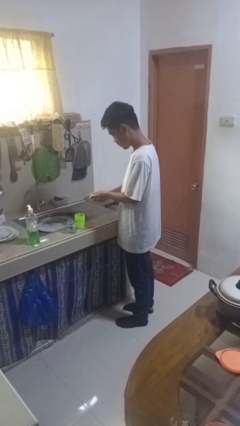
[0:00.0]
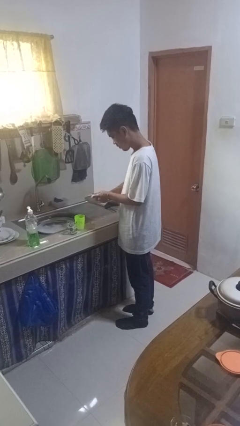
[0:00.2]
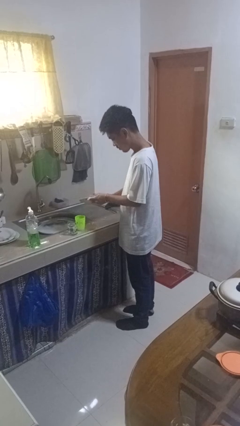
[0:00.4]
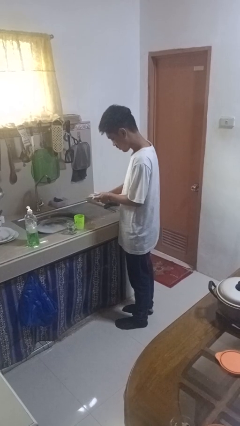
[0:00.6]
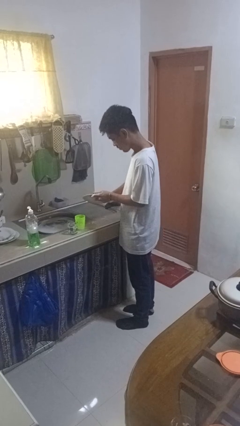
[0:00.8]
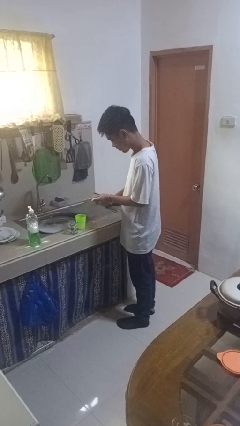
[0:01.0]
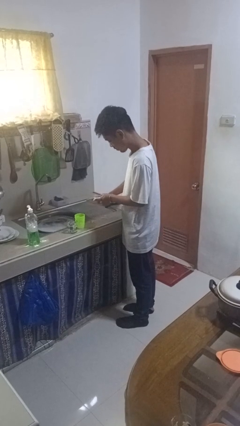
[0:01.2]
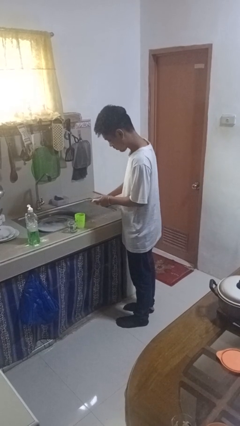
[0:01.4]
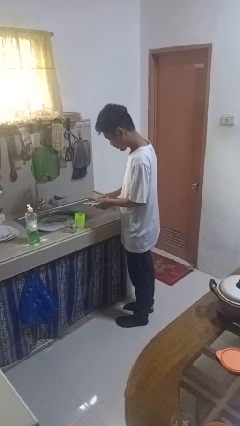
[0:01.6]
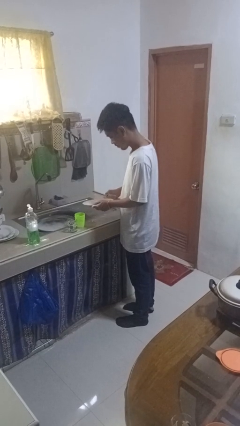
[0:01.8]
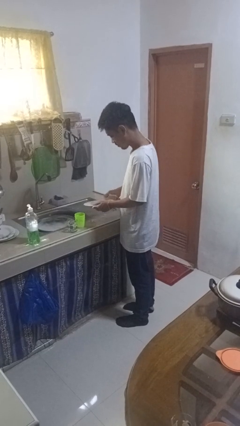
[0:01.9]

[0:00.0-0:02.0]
person washes dish

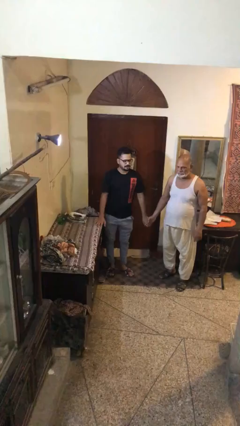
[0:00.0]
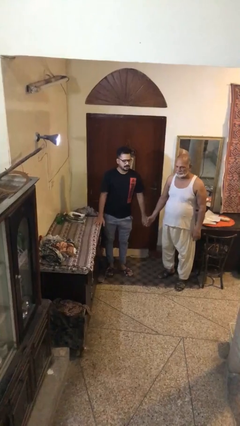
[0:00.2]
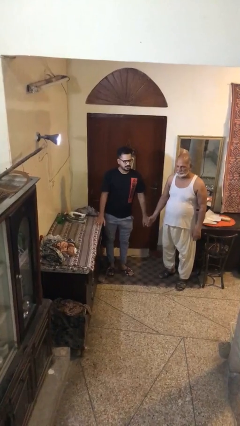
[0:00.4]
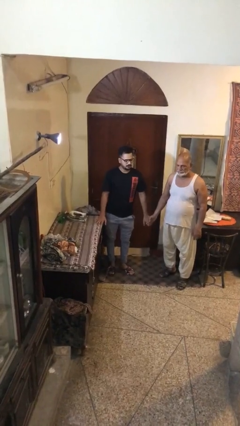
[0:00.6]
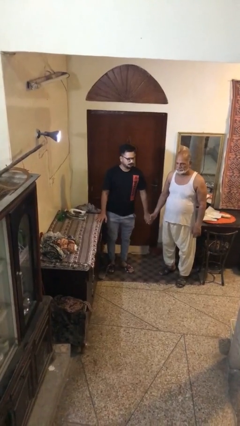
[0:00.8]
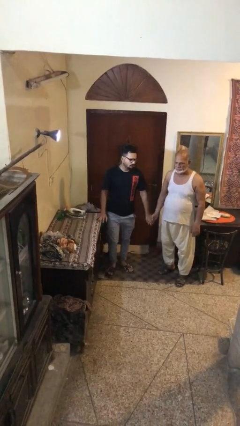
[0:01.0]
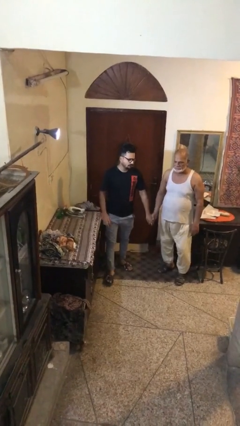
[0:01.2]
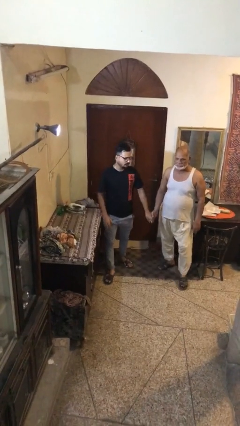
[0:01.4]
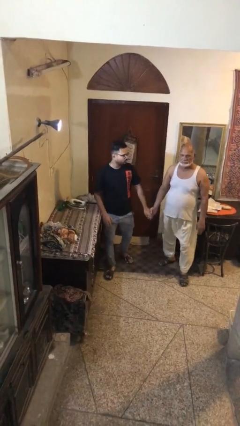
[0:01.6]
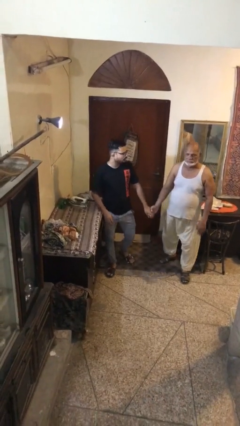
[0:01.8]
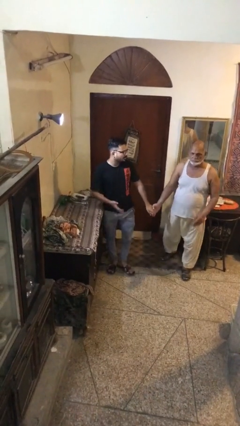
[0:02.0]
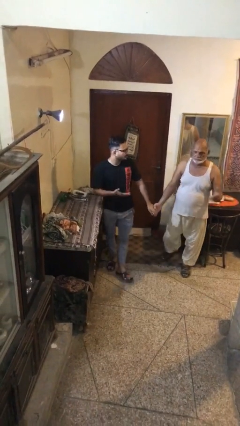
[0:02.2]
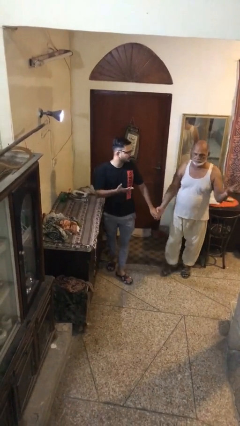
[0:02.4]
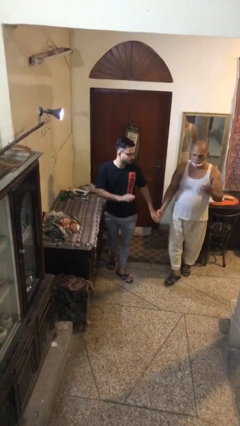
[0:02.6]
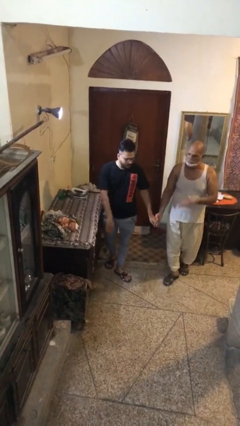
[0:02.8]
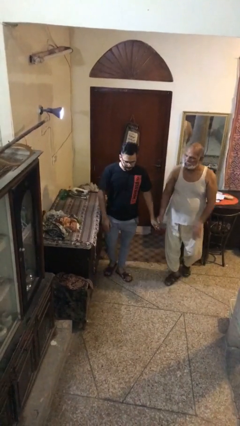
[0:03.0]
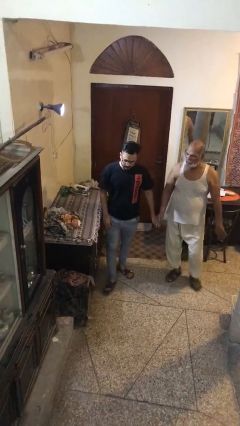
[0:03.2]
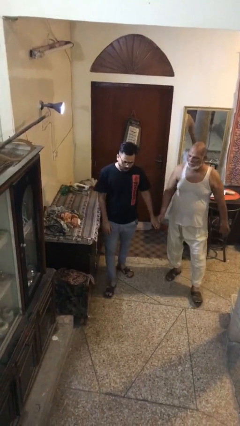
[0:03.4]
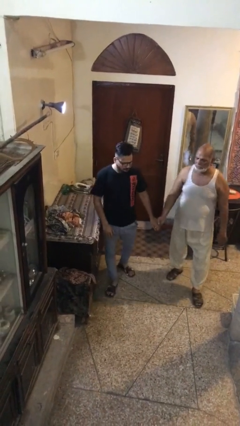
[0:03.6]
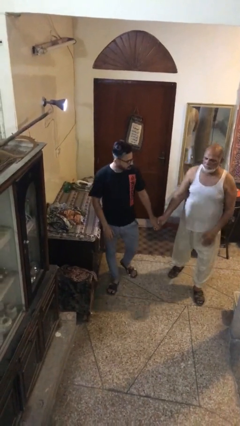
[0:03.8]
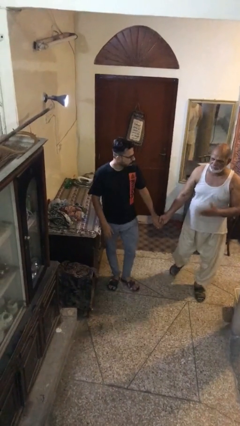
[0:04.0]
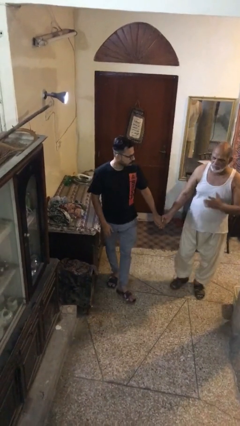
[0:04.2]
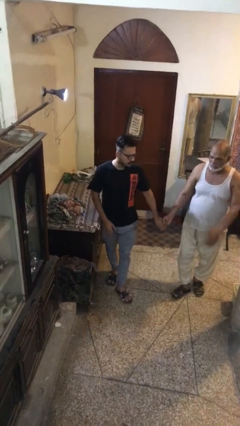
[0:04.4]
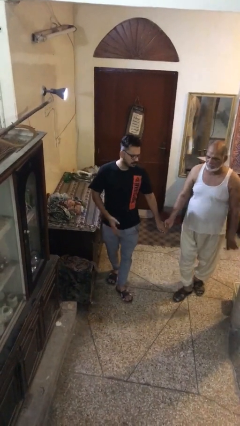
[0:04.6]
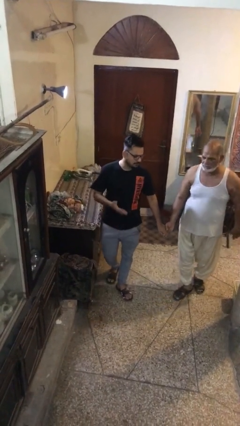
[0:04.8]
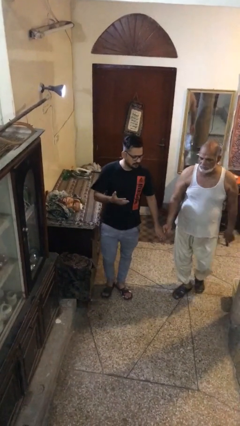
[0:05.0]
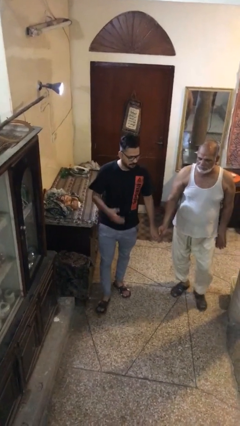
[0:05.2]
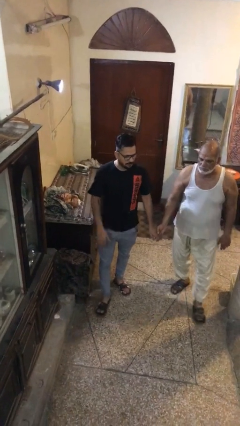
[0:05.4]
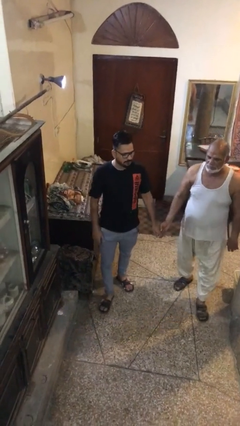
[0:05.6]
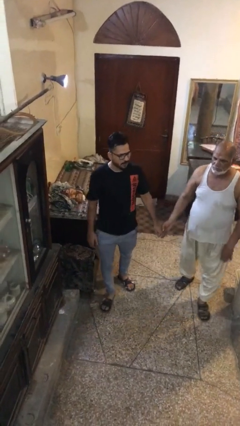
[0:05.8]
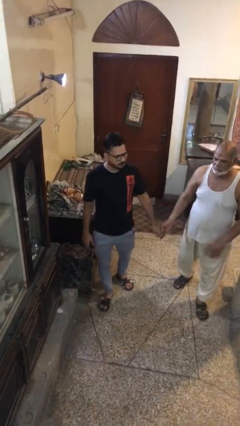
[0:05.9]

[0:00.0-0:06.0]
person holds hand

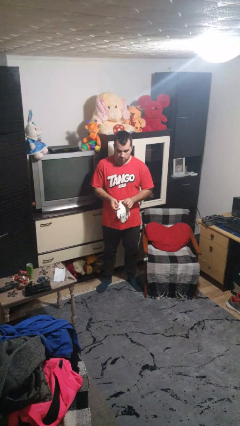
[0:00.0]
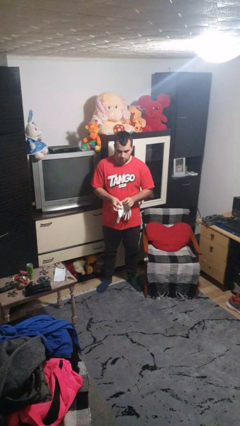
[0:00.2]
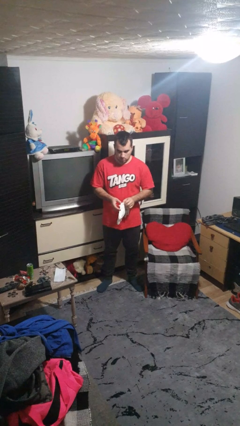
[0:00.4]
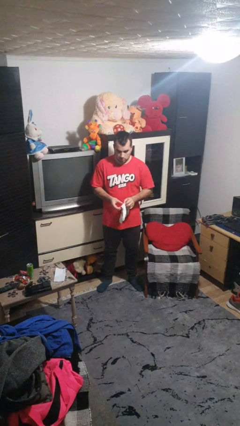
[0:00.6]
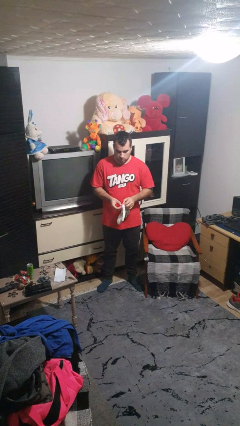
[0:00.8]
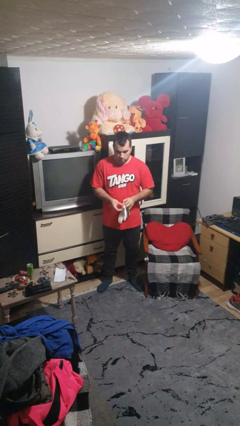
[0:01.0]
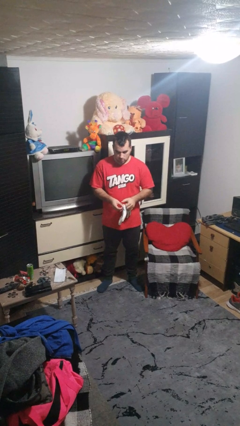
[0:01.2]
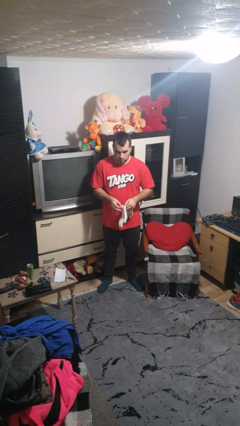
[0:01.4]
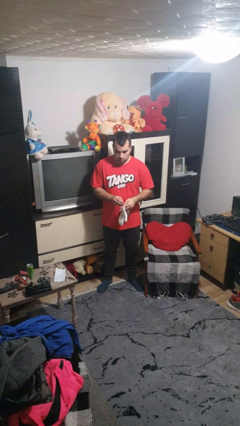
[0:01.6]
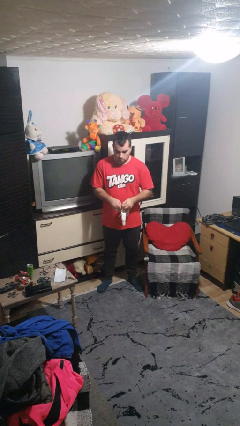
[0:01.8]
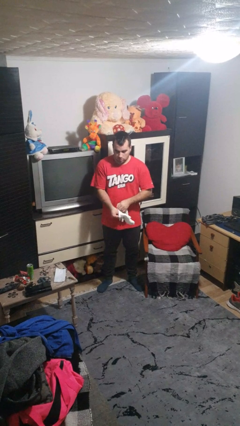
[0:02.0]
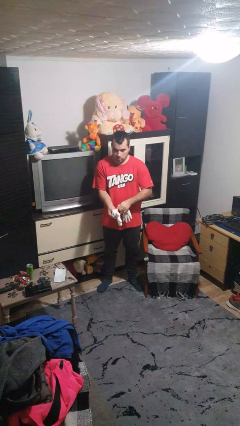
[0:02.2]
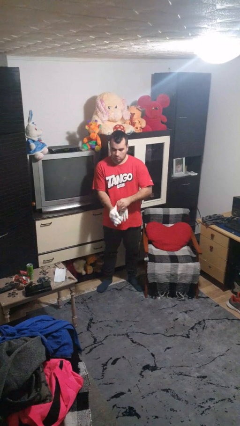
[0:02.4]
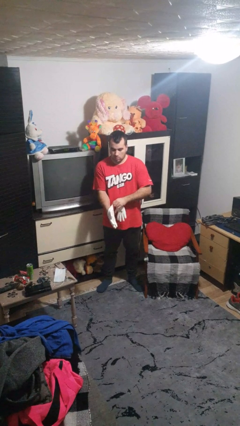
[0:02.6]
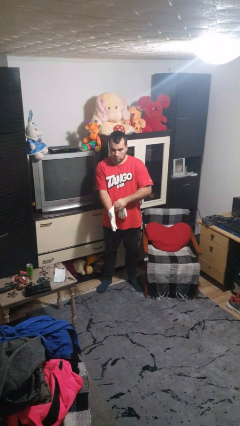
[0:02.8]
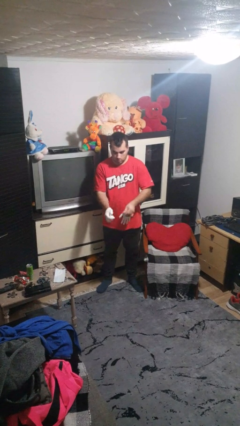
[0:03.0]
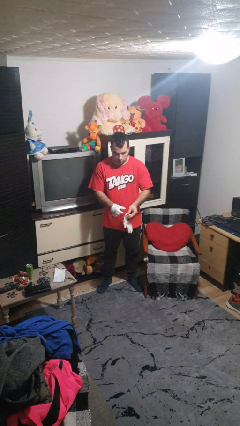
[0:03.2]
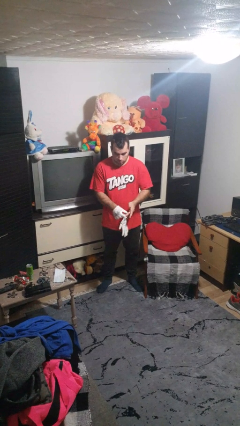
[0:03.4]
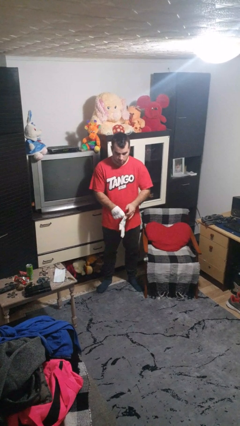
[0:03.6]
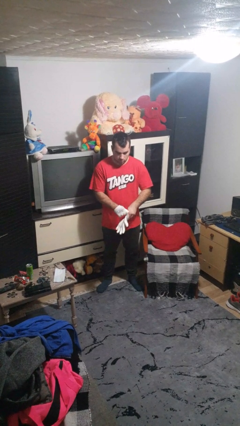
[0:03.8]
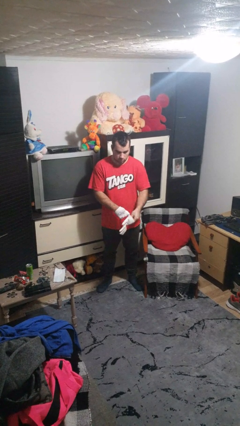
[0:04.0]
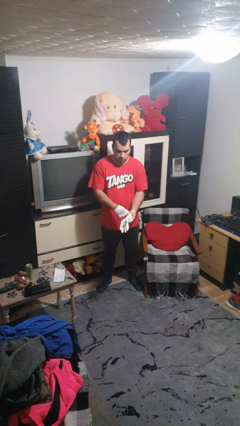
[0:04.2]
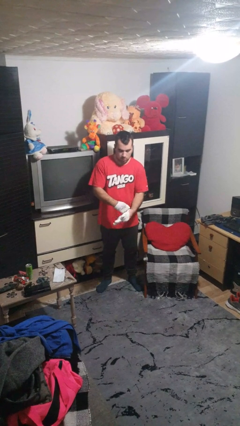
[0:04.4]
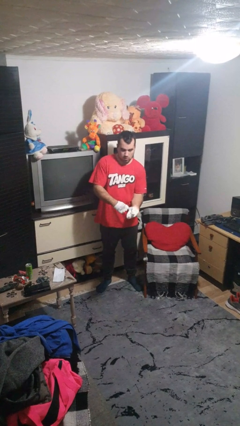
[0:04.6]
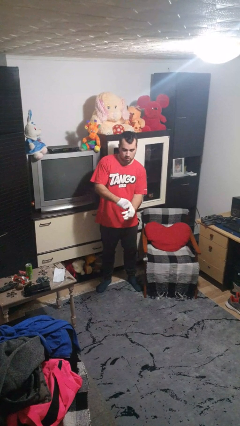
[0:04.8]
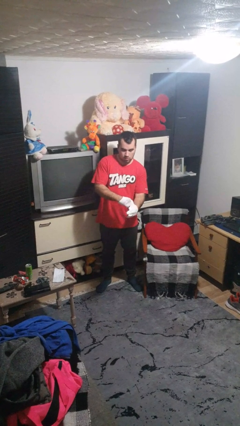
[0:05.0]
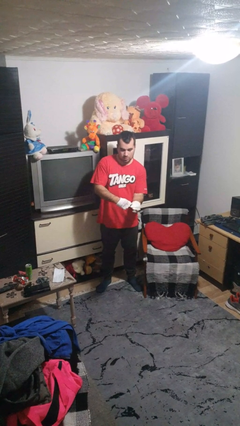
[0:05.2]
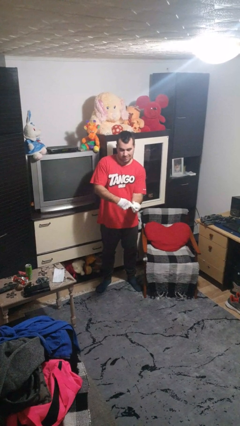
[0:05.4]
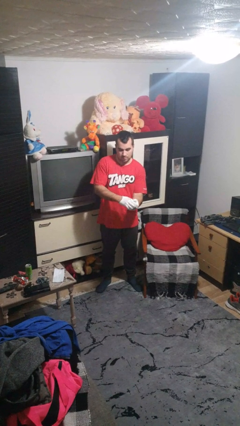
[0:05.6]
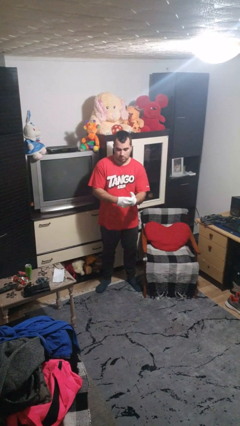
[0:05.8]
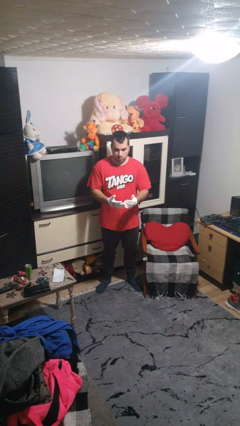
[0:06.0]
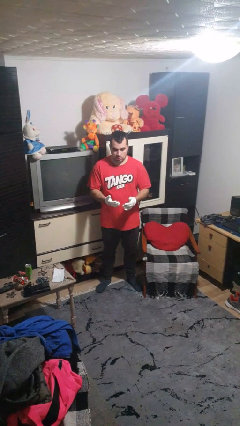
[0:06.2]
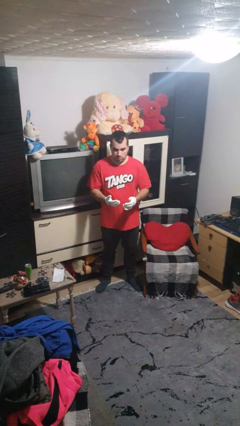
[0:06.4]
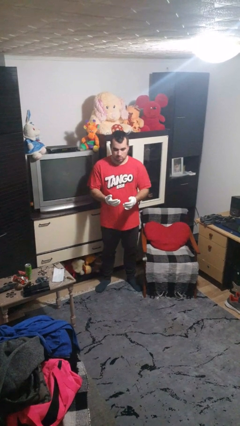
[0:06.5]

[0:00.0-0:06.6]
person puts on gloves

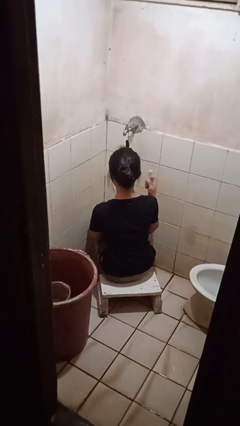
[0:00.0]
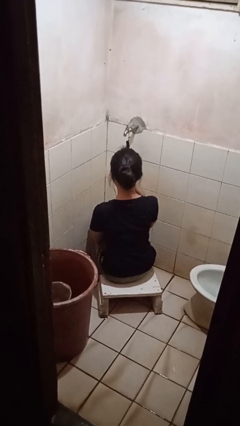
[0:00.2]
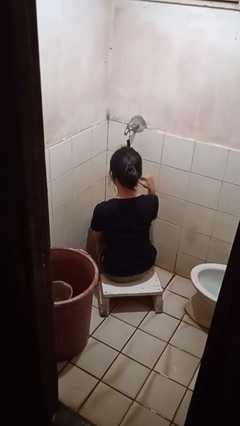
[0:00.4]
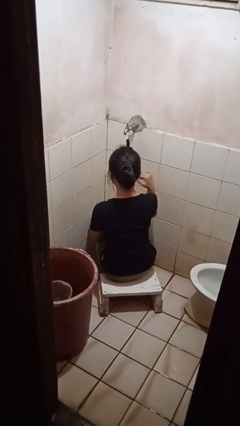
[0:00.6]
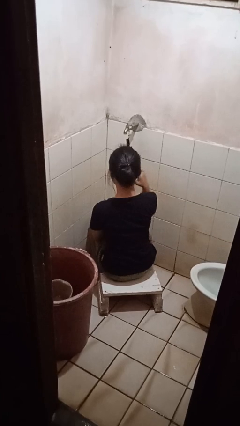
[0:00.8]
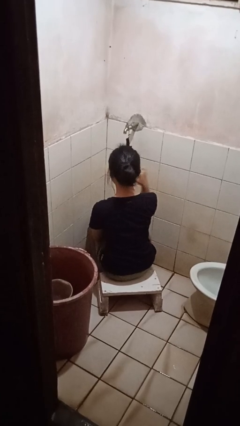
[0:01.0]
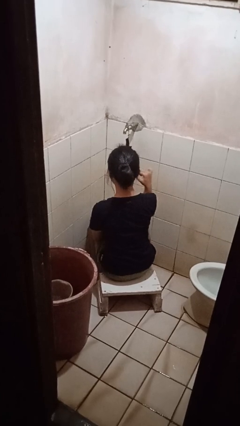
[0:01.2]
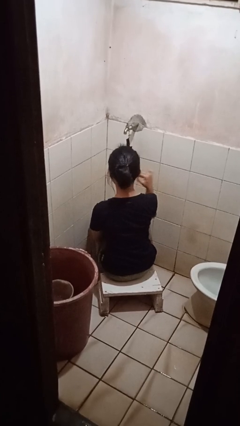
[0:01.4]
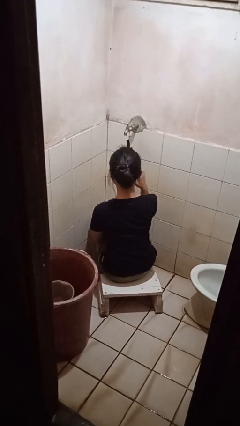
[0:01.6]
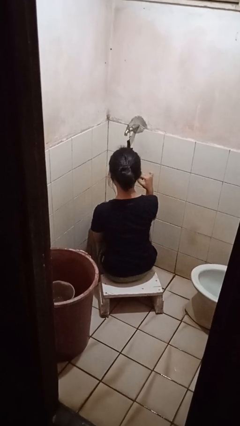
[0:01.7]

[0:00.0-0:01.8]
person brushes teeth

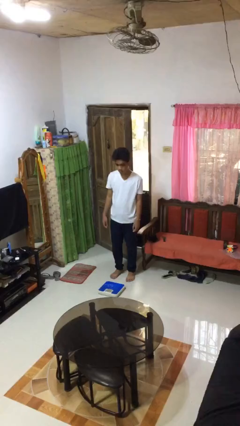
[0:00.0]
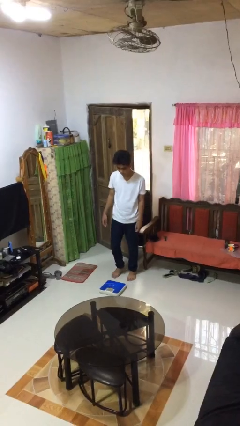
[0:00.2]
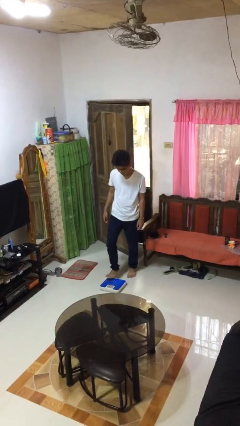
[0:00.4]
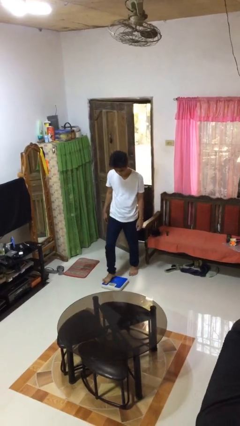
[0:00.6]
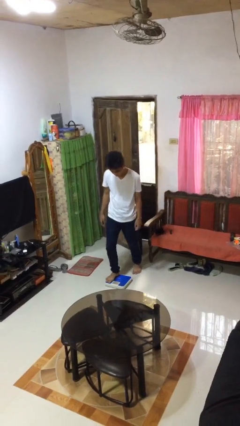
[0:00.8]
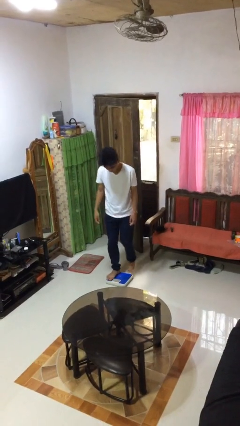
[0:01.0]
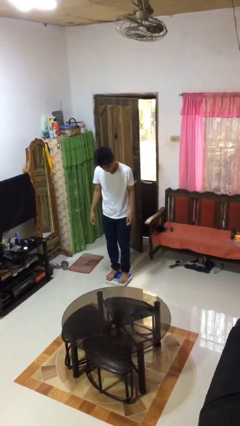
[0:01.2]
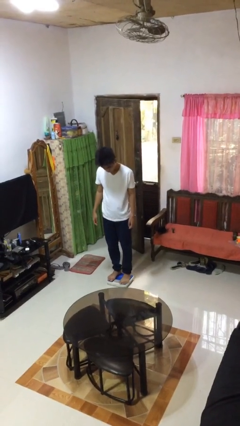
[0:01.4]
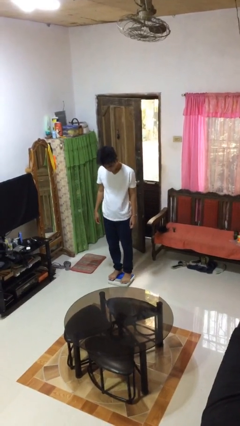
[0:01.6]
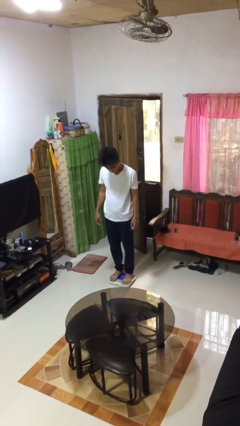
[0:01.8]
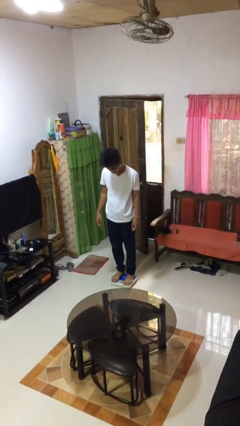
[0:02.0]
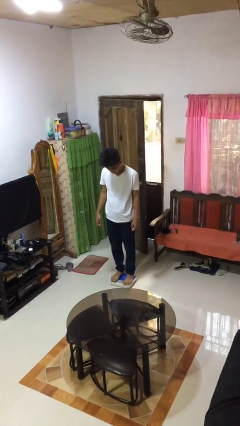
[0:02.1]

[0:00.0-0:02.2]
person uses bodyweight scale
